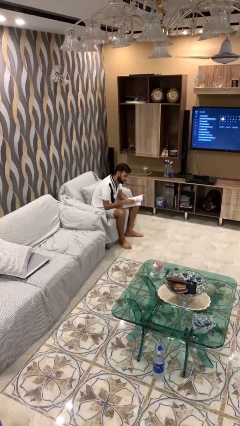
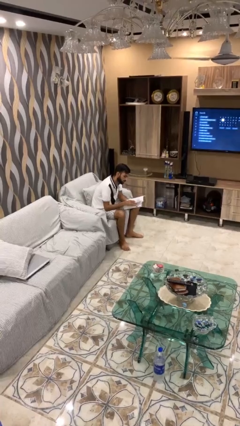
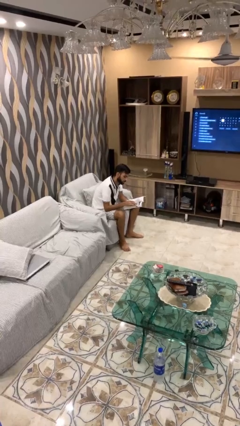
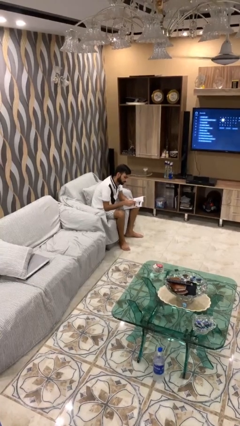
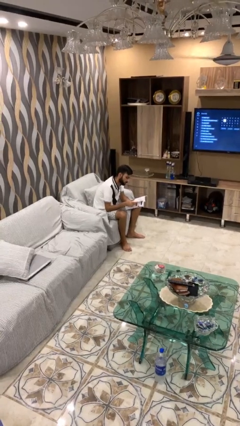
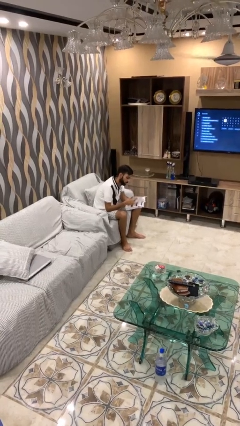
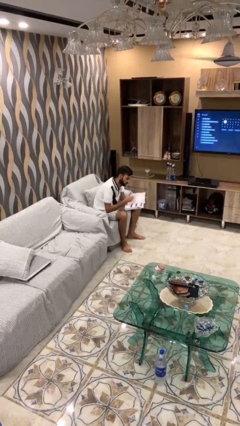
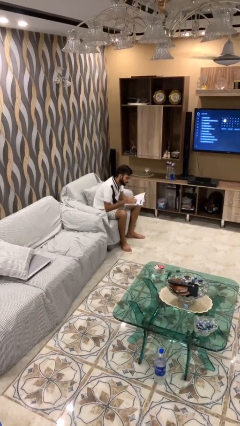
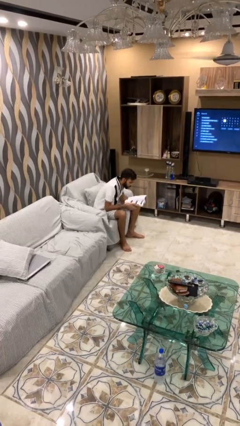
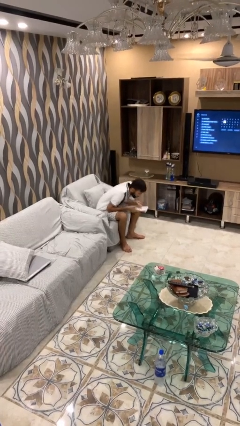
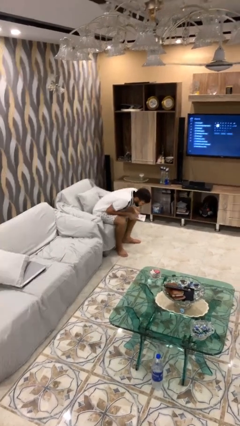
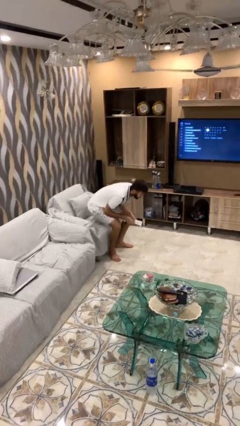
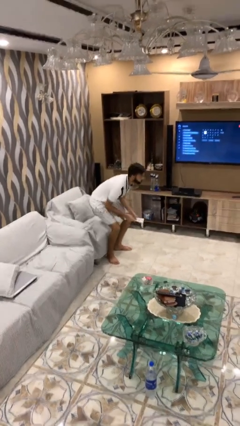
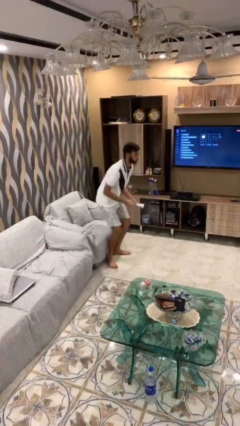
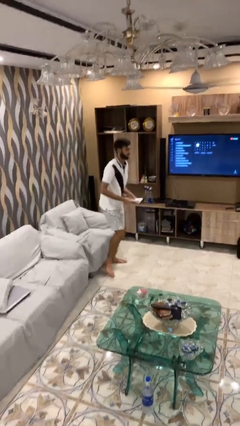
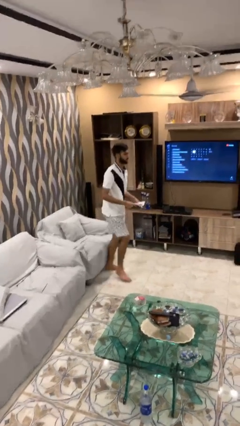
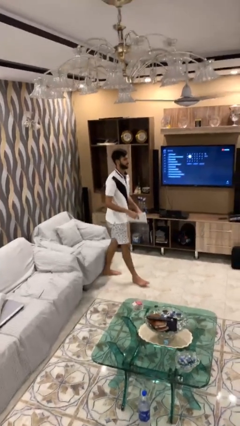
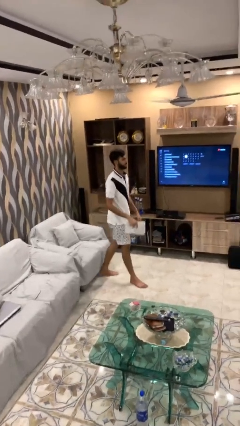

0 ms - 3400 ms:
person stands up

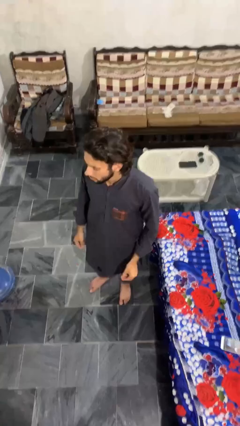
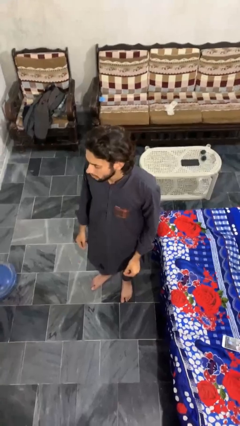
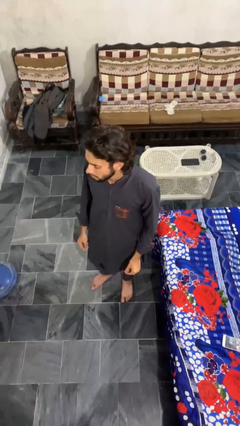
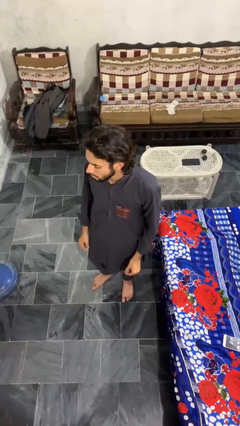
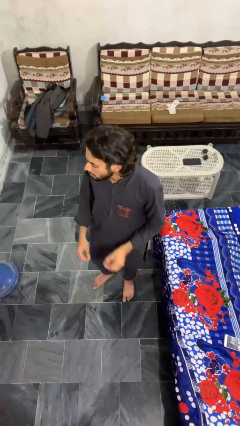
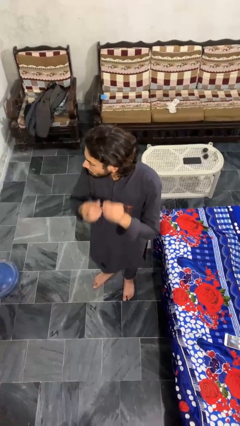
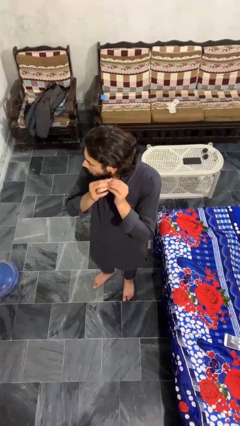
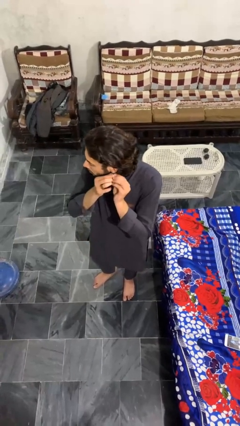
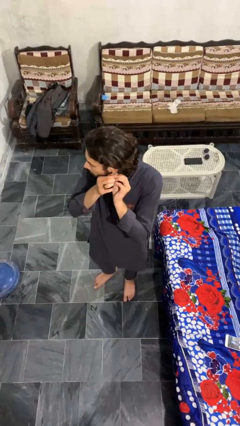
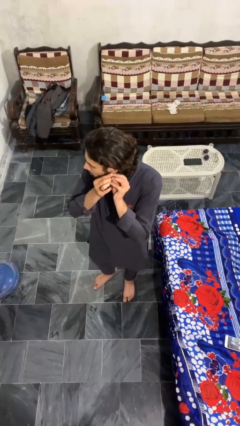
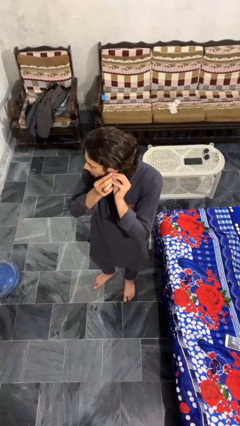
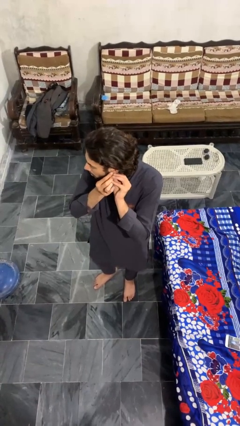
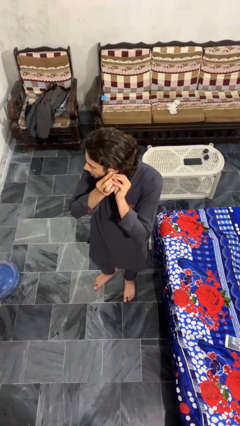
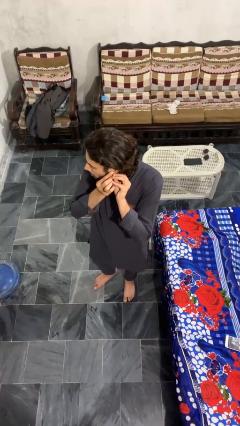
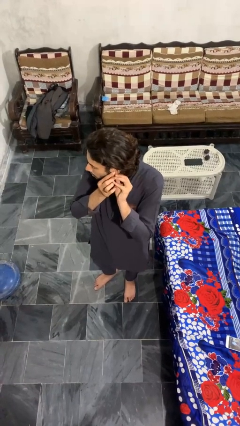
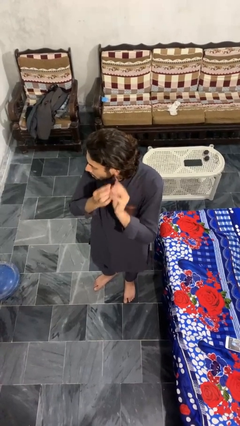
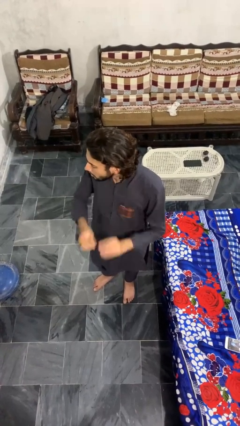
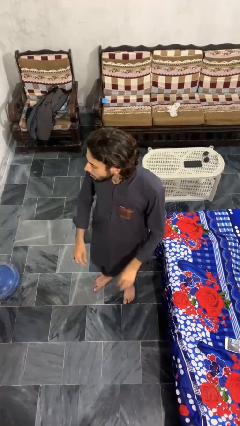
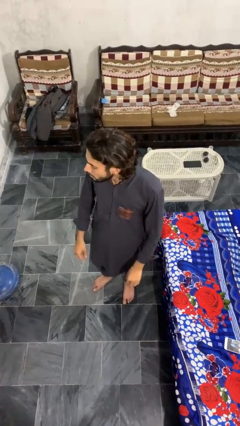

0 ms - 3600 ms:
person puts on earrings

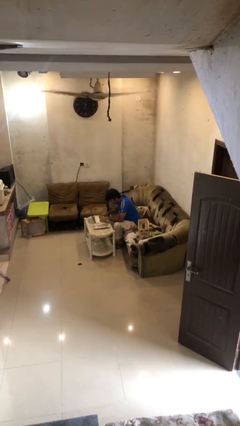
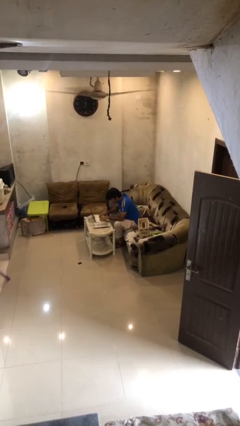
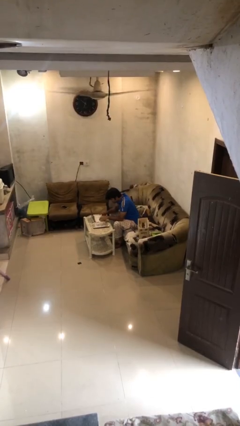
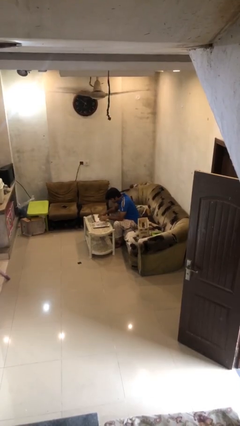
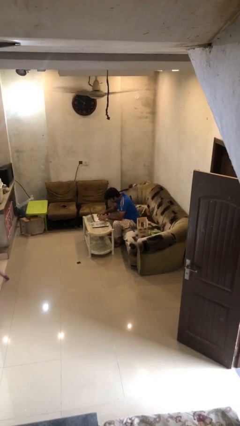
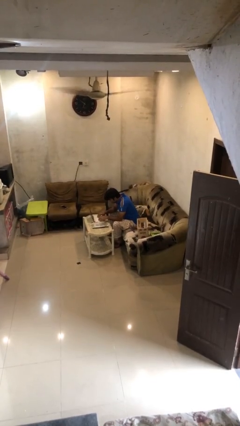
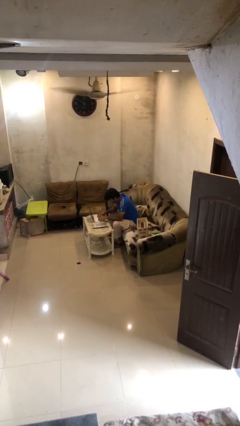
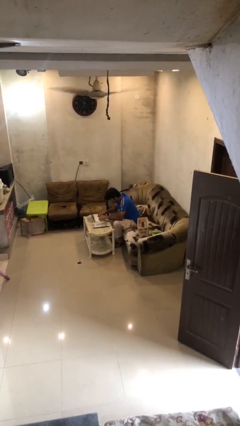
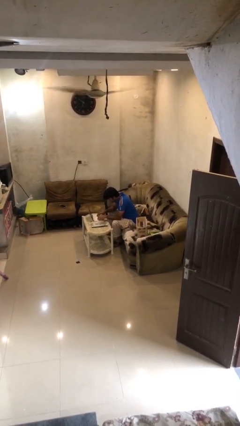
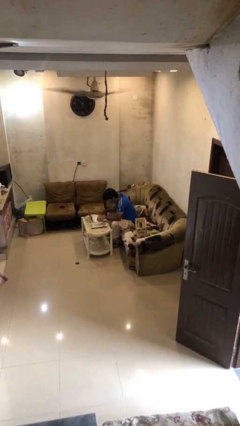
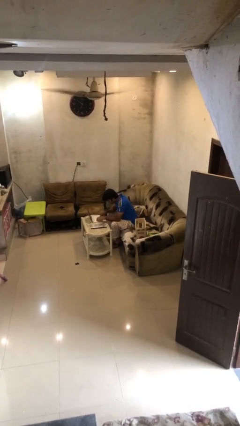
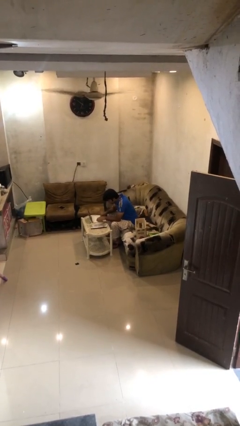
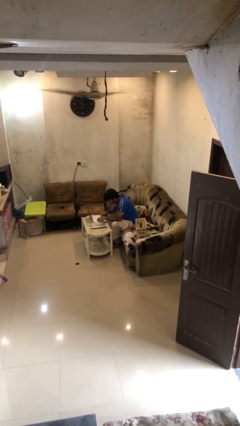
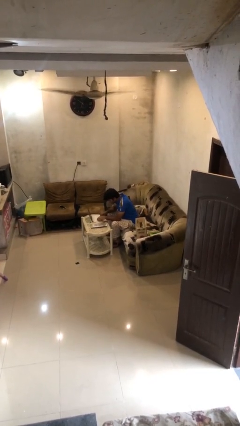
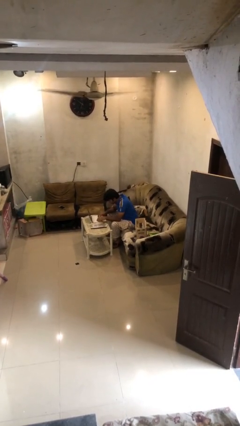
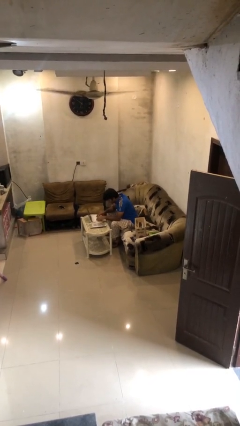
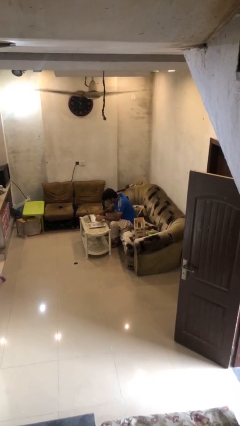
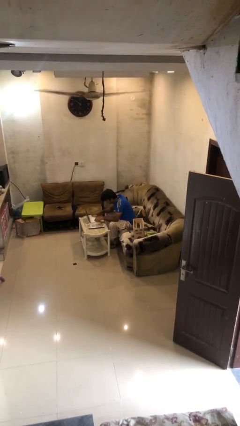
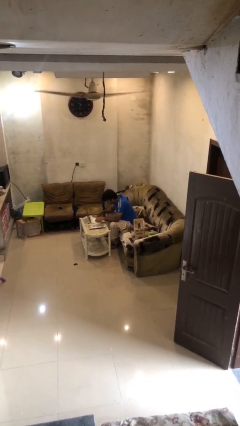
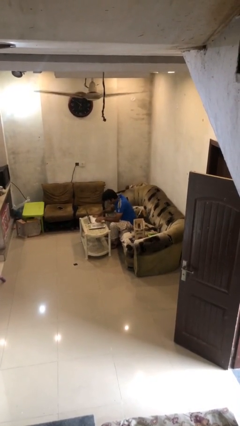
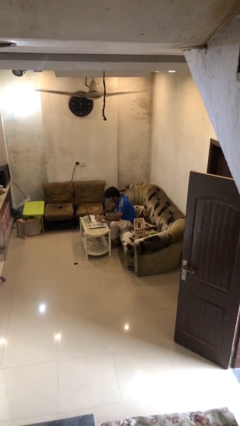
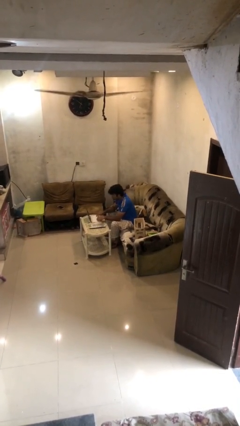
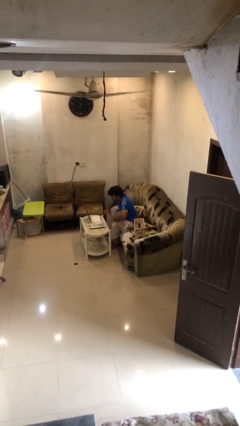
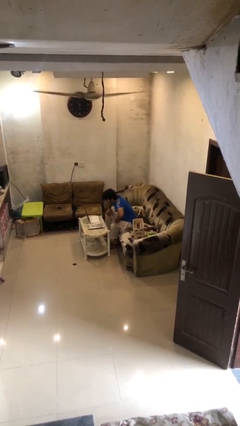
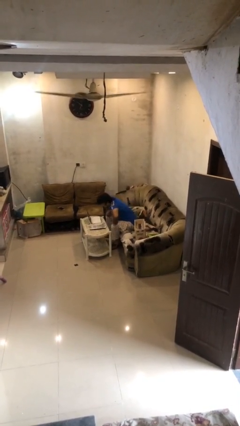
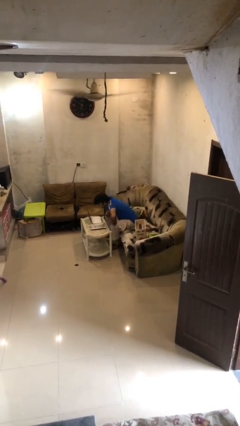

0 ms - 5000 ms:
person interacts with laptop

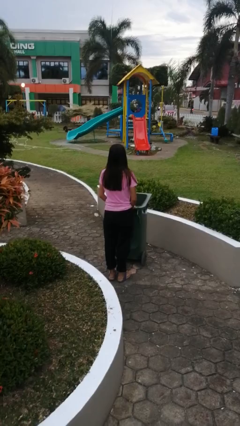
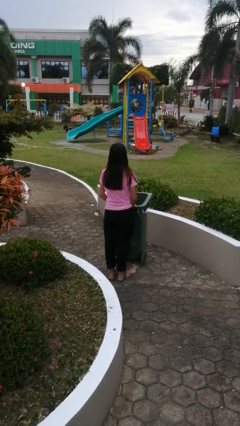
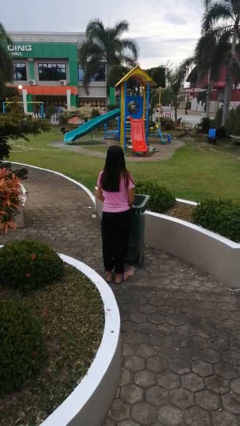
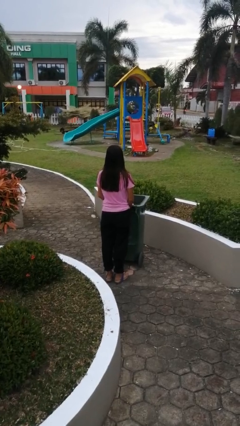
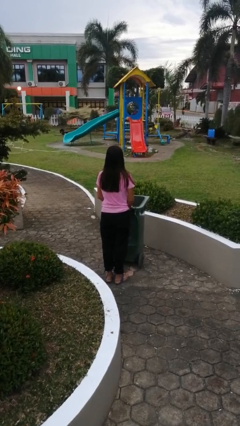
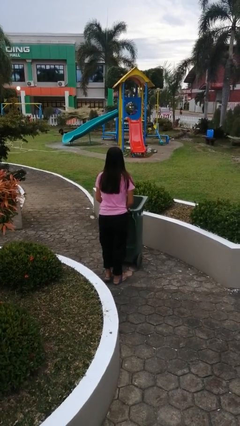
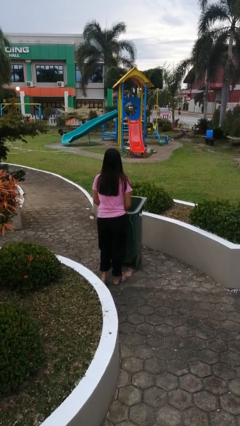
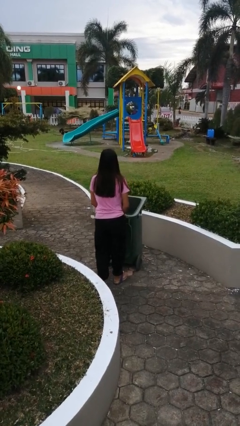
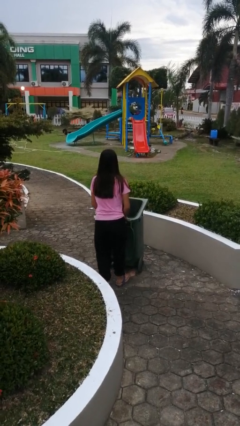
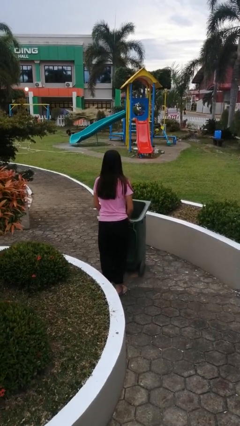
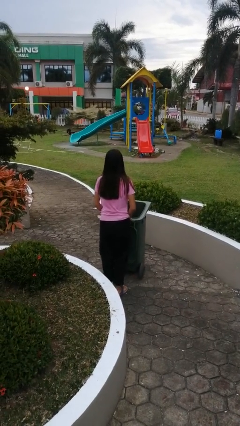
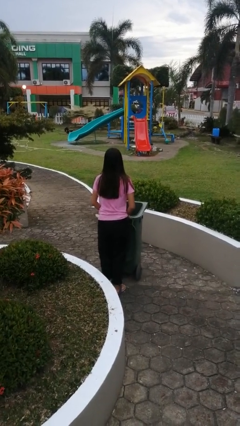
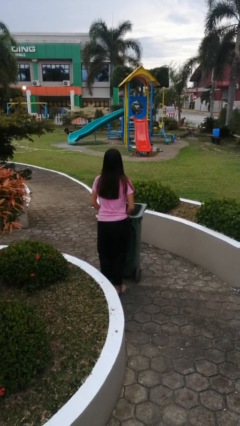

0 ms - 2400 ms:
person pulls wheeled trashcan

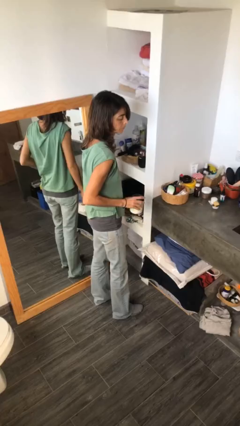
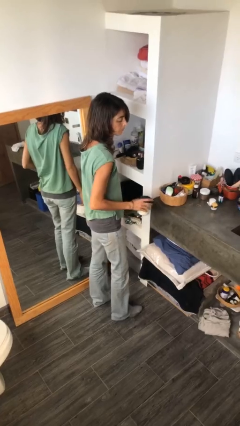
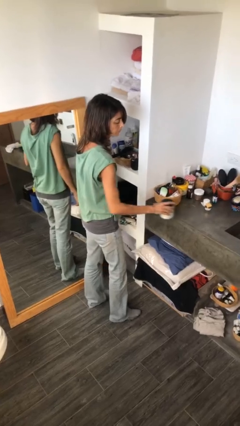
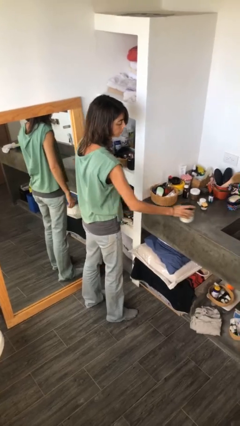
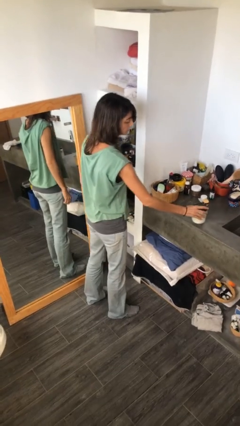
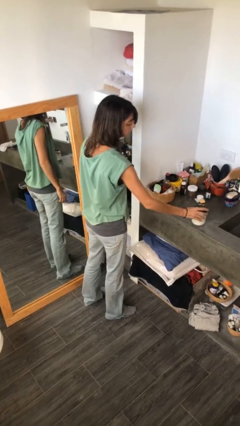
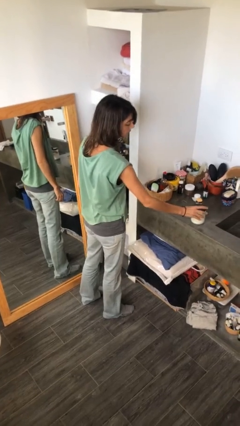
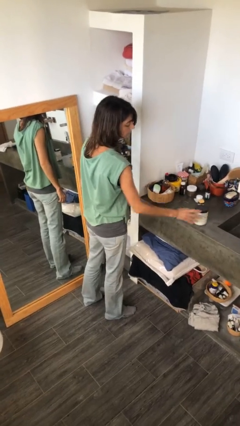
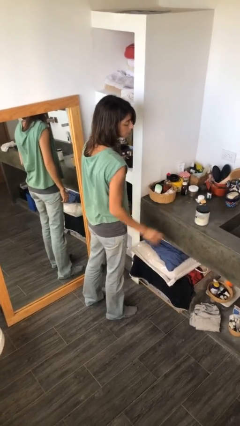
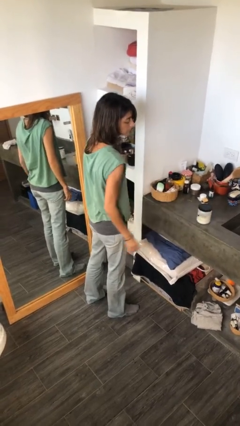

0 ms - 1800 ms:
person puts down object on countertop

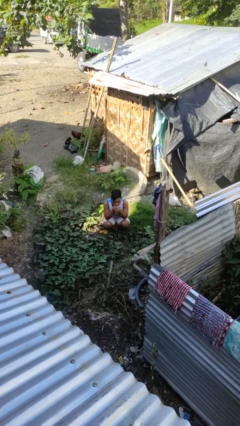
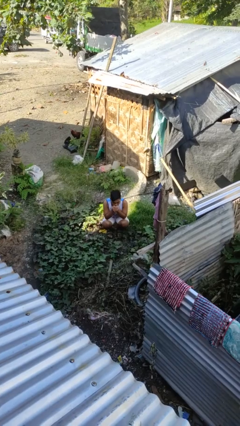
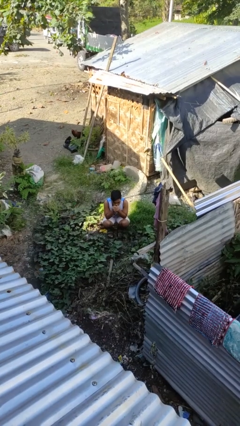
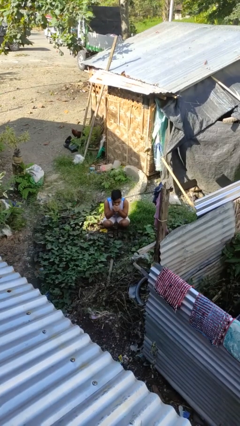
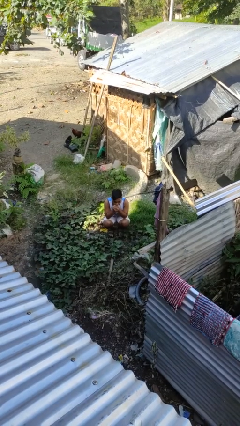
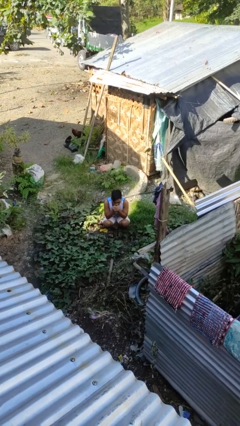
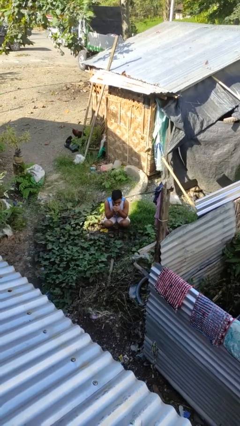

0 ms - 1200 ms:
person blows into hands
